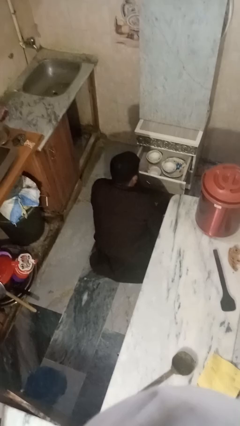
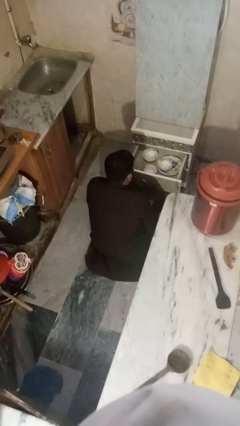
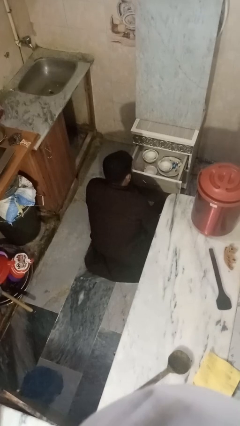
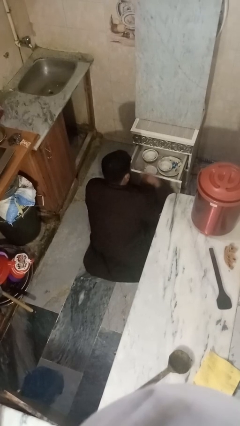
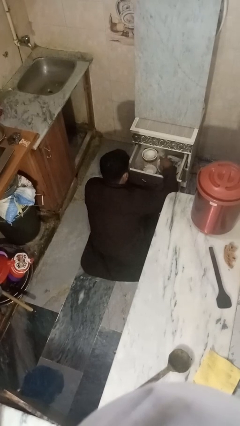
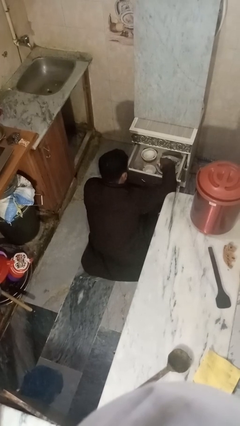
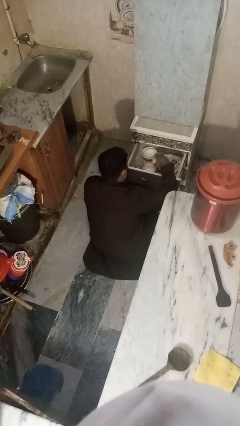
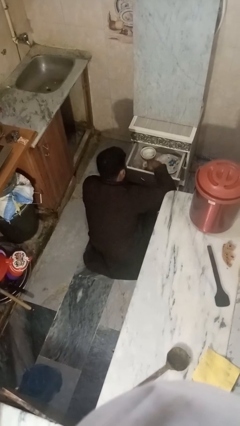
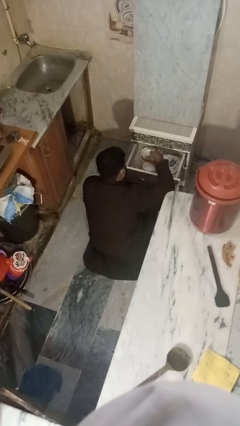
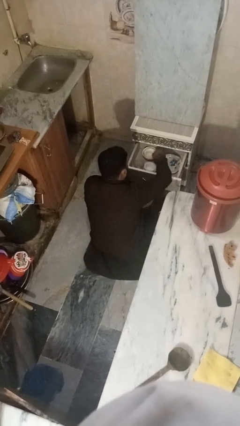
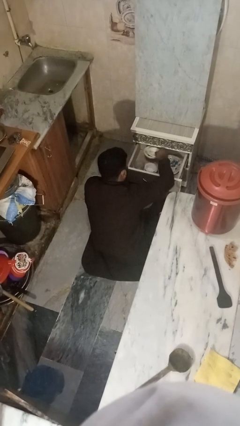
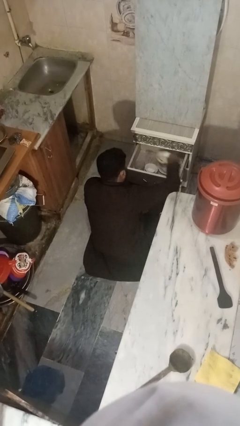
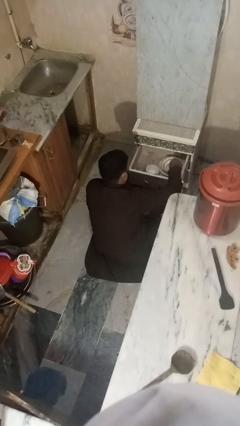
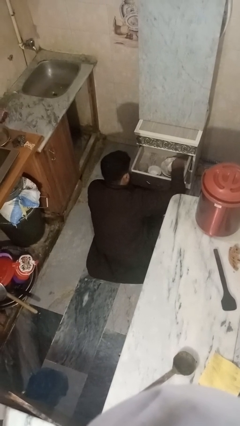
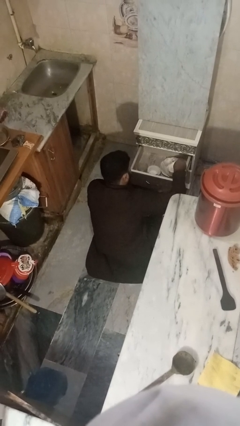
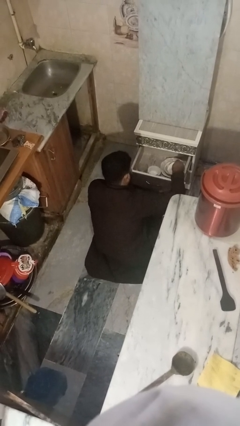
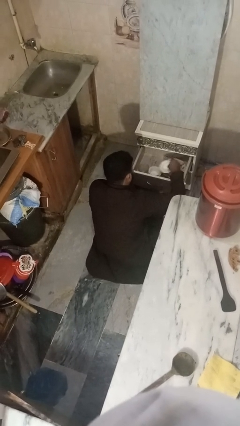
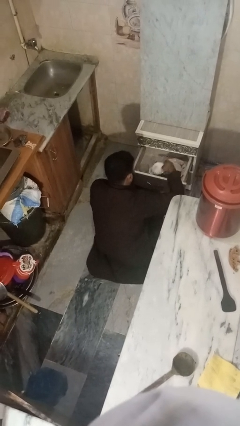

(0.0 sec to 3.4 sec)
person searches in kitchen drawer

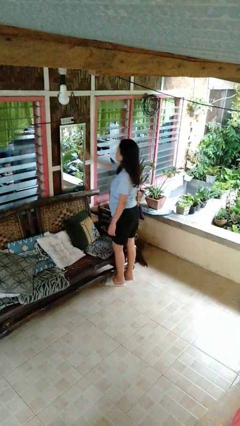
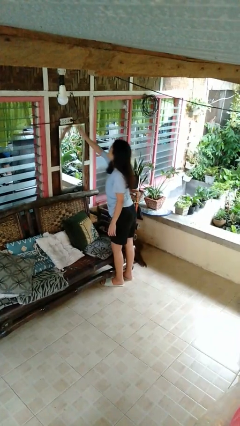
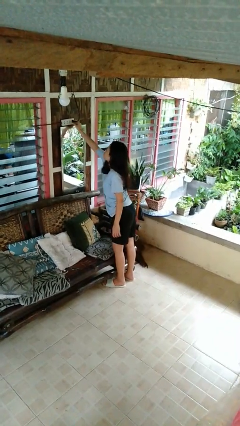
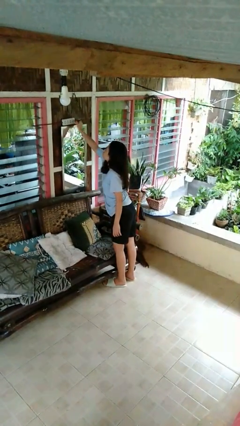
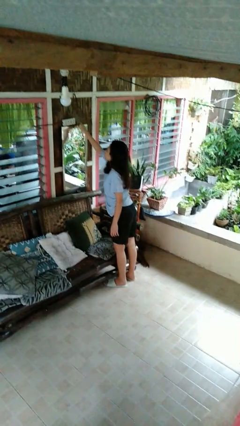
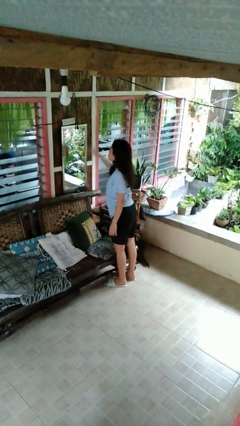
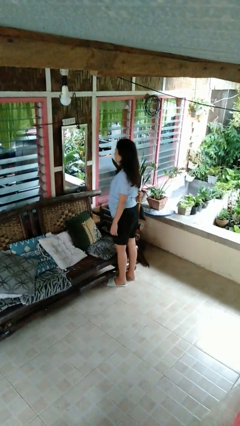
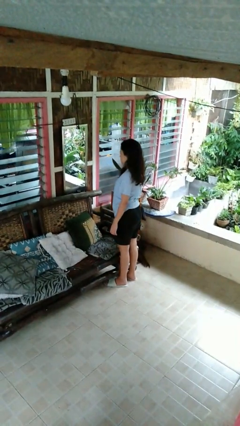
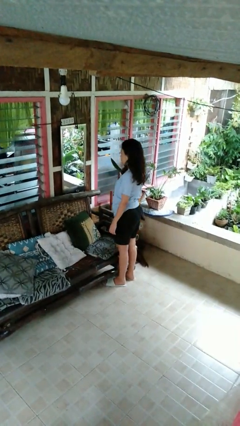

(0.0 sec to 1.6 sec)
person unplugs from electrical socket

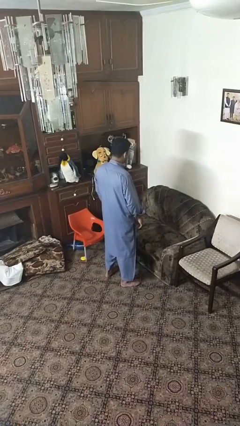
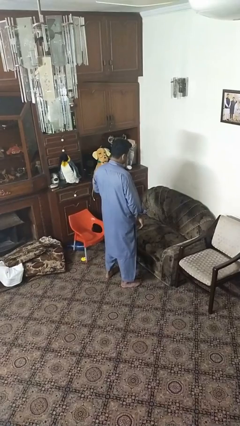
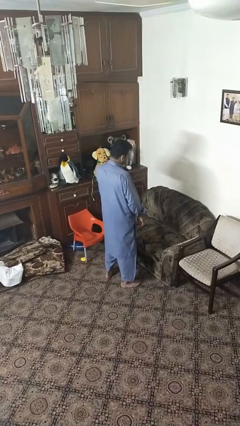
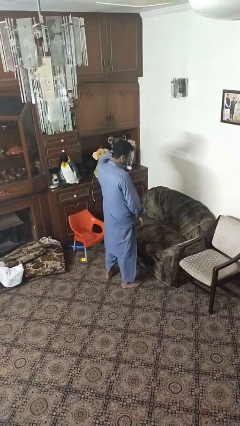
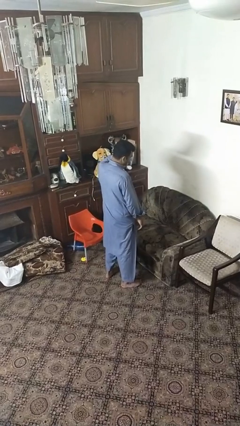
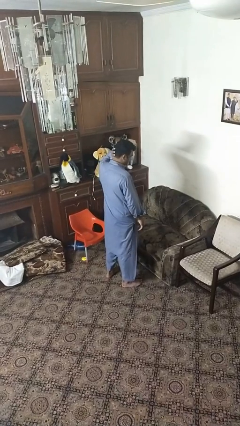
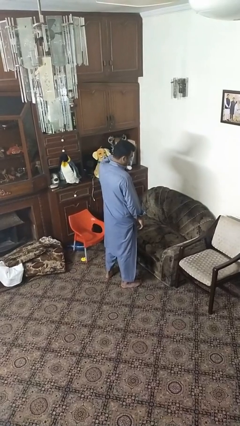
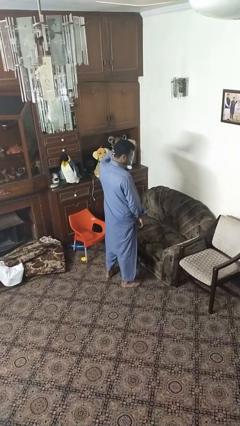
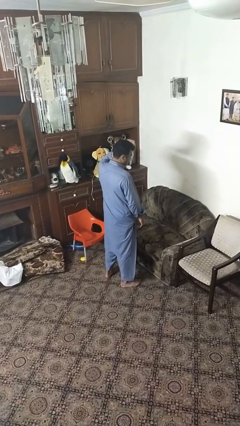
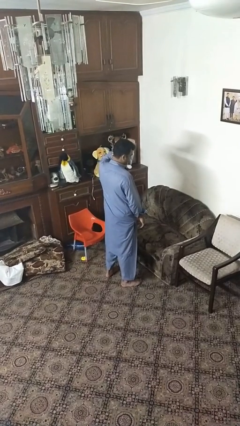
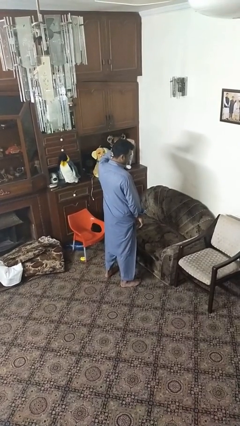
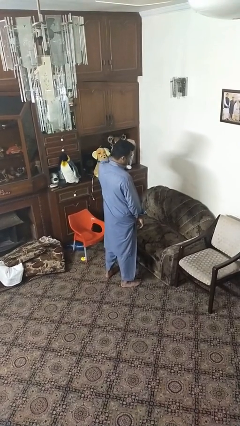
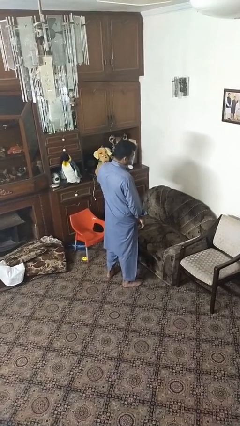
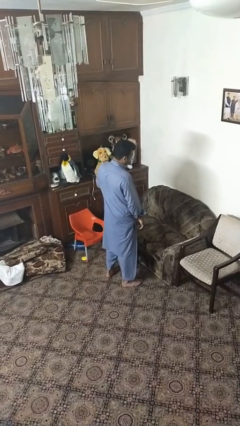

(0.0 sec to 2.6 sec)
person strokes hair

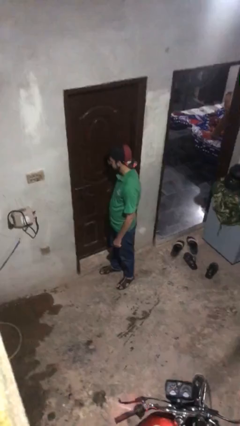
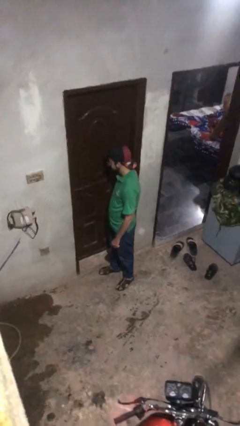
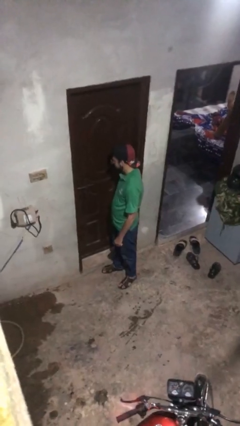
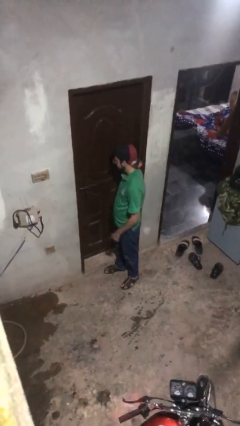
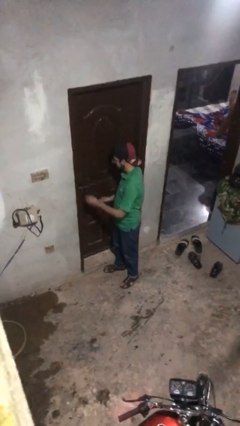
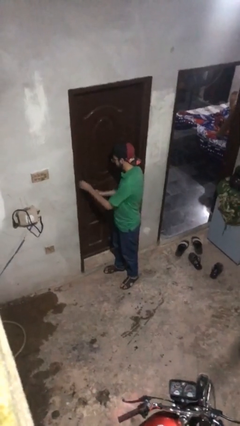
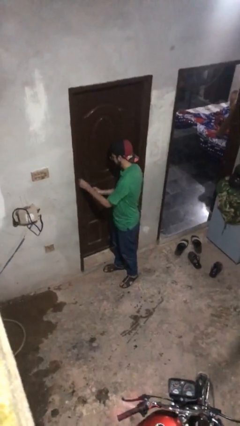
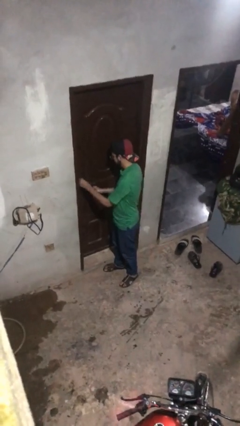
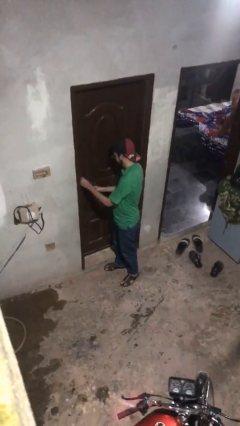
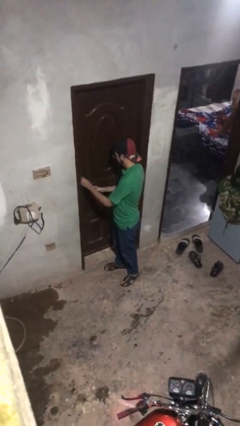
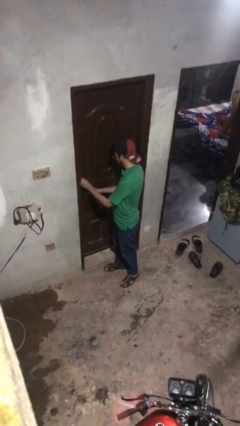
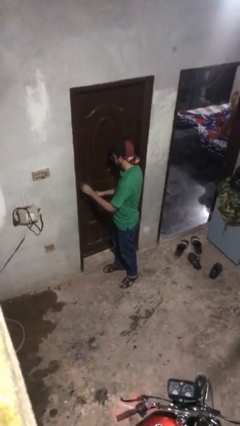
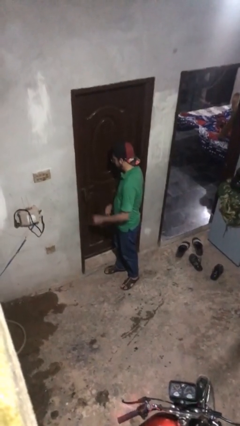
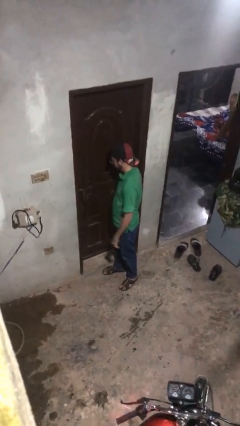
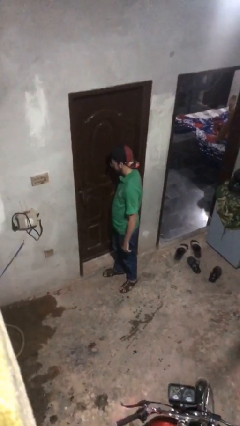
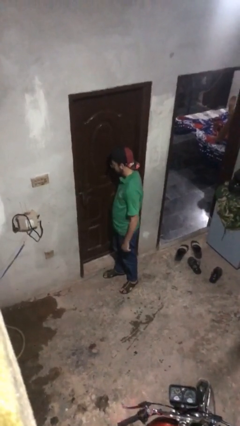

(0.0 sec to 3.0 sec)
person locks door with keys

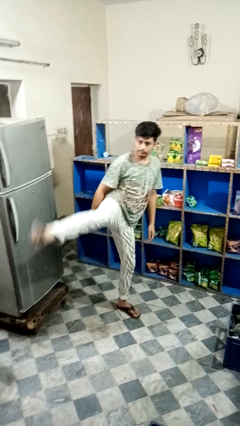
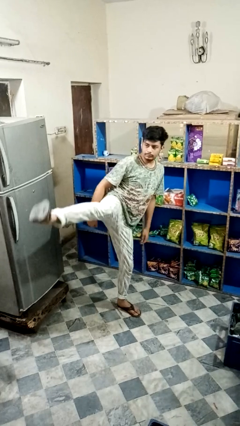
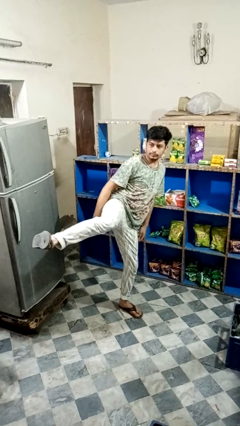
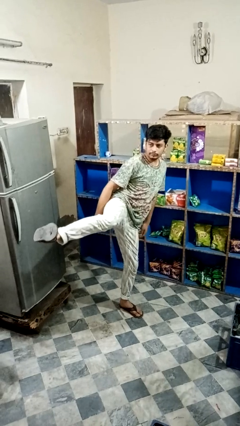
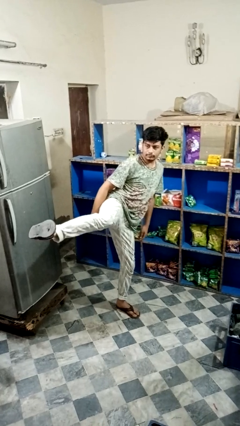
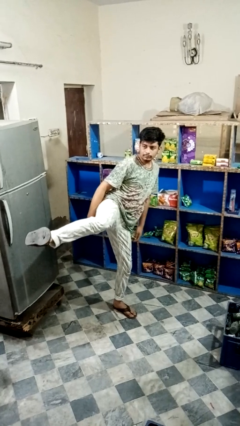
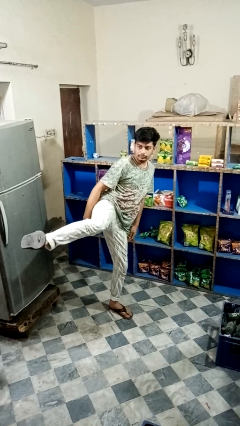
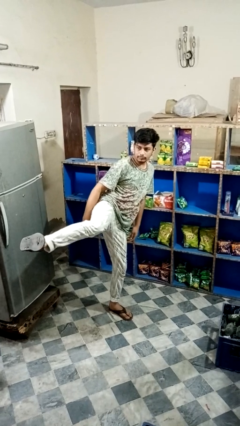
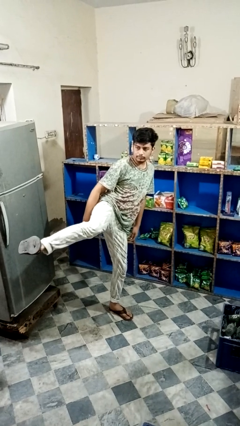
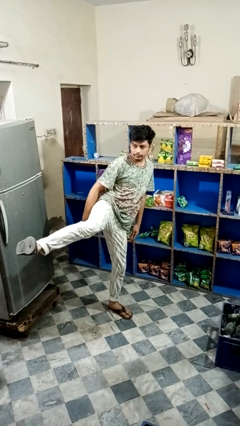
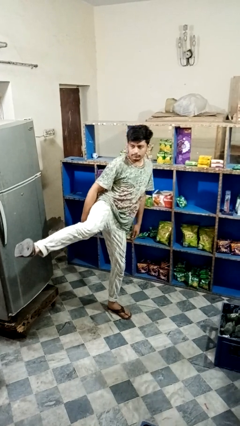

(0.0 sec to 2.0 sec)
person karate kicks

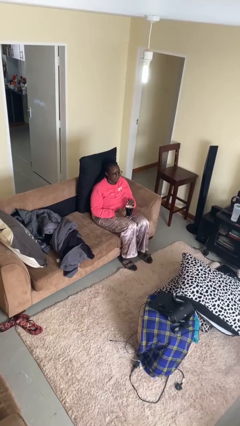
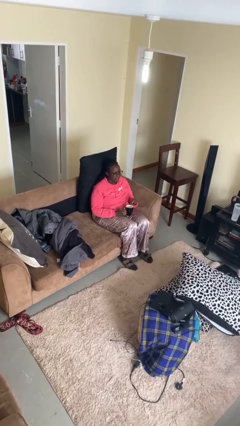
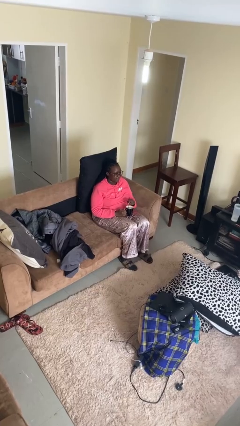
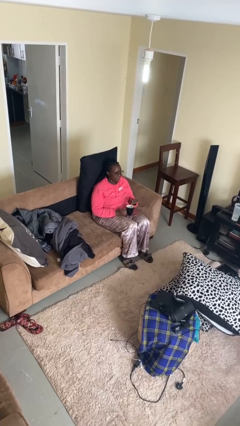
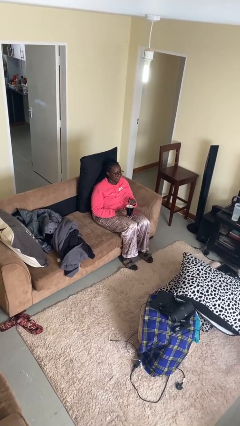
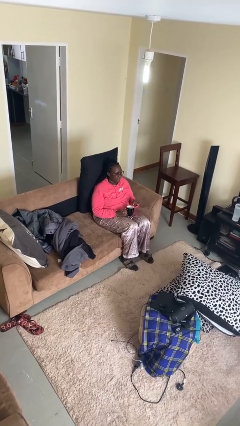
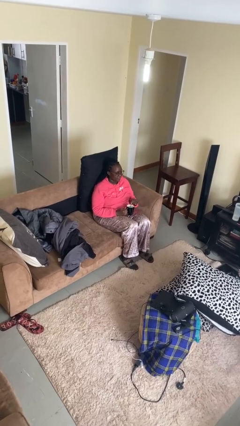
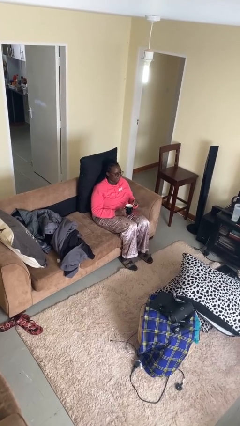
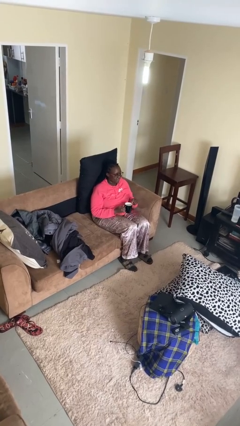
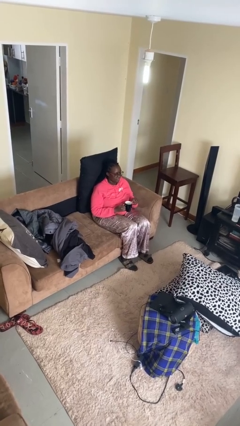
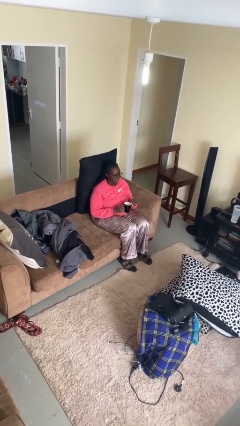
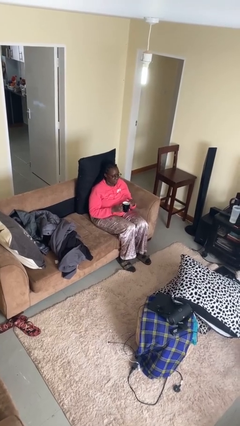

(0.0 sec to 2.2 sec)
person stirs mug

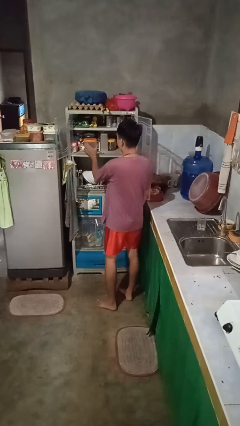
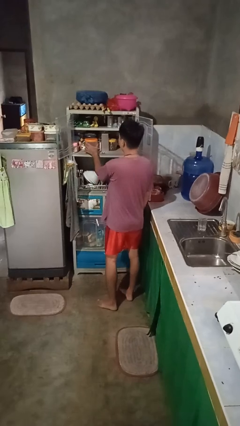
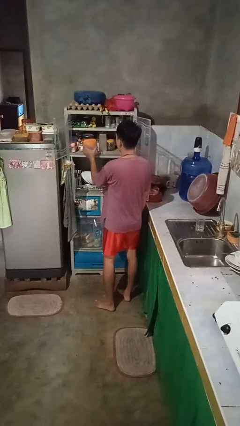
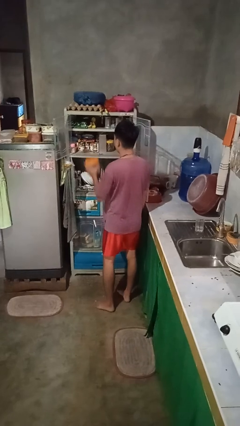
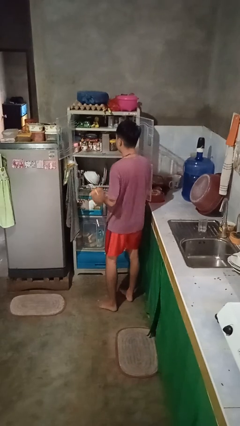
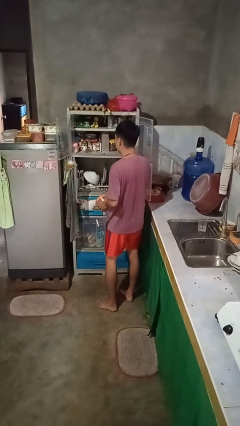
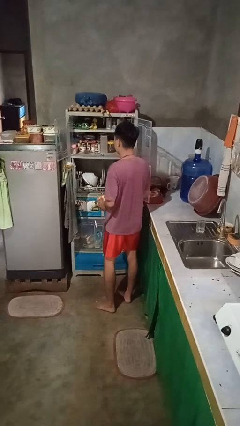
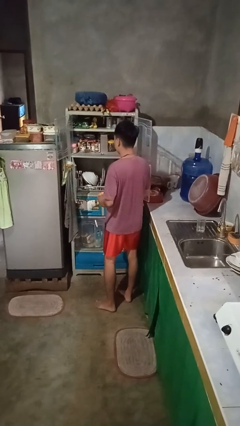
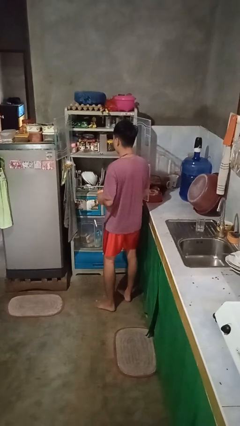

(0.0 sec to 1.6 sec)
person takes object from cabinet

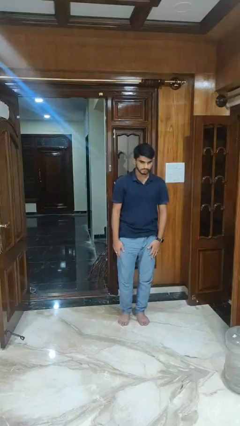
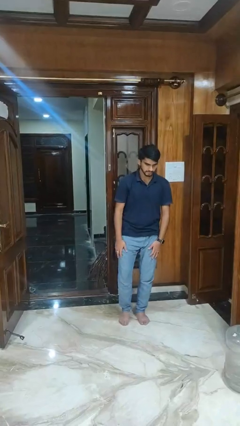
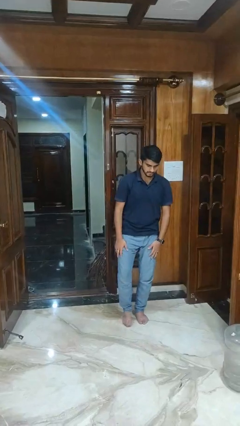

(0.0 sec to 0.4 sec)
person stands up from floor
